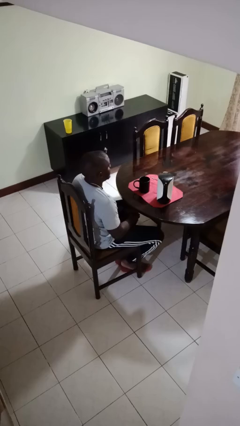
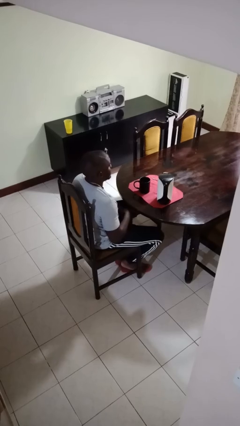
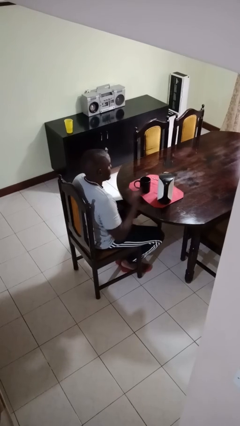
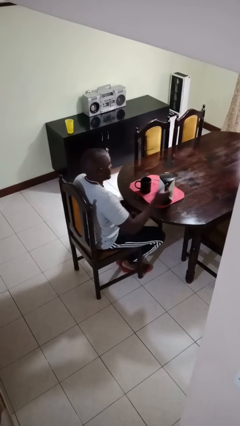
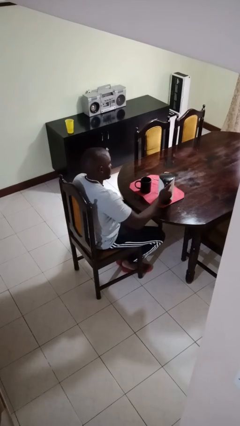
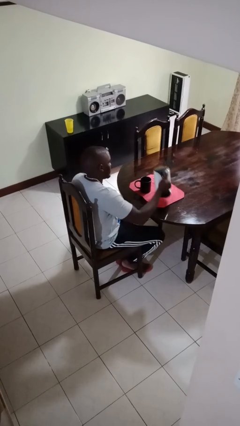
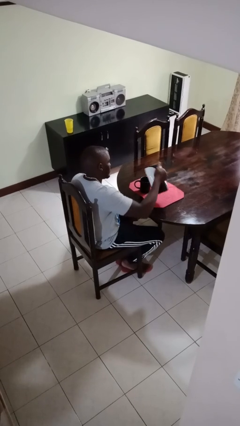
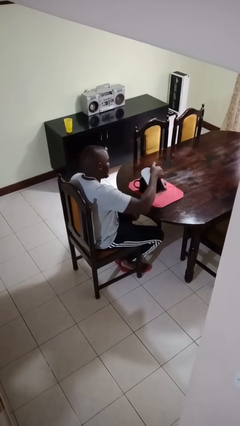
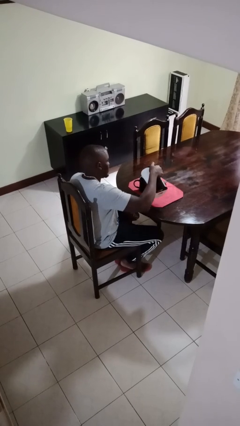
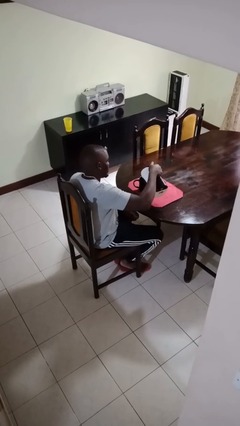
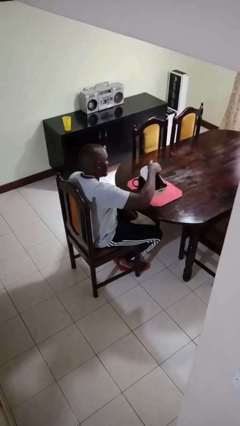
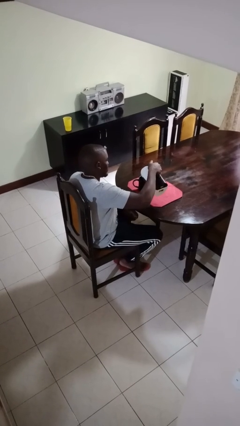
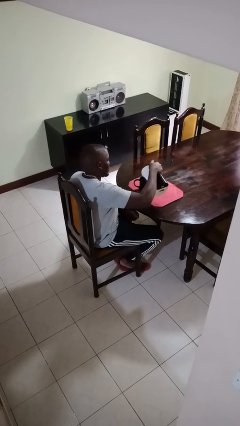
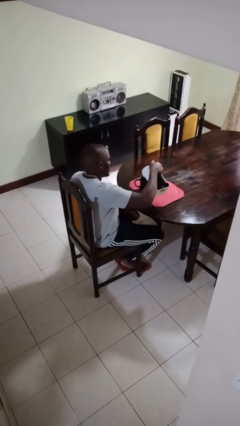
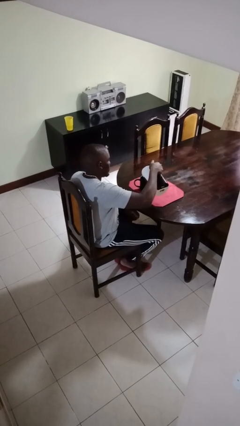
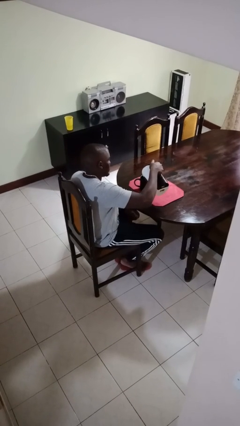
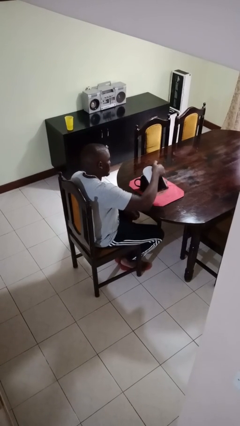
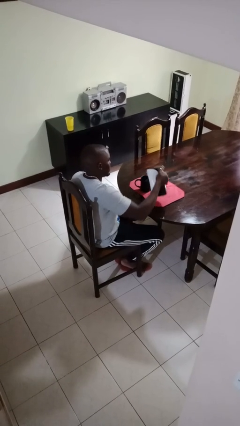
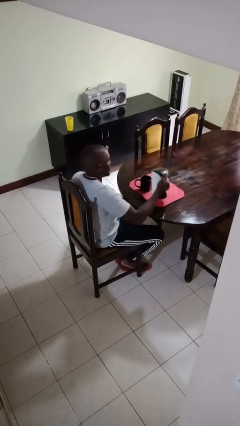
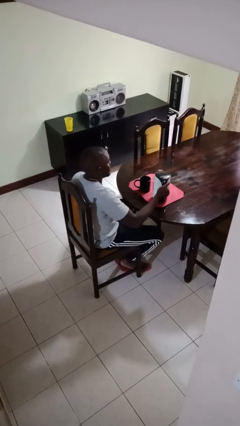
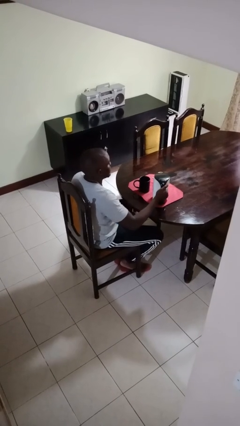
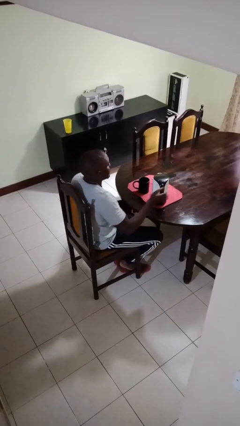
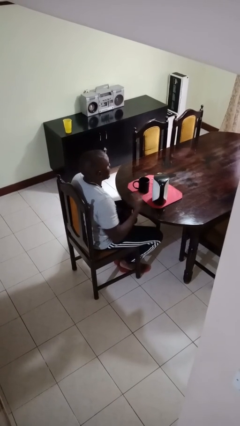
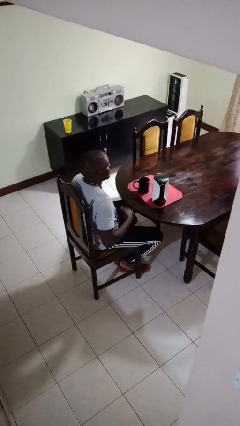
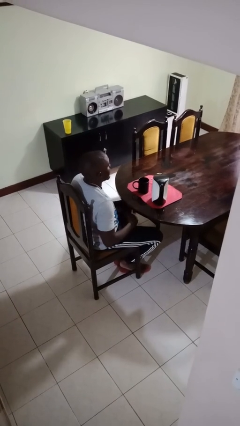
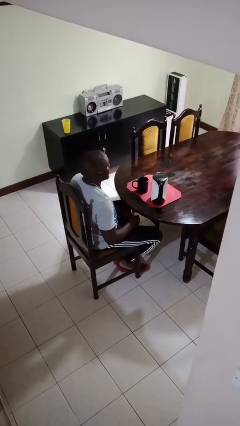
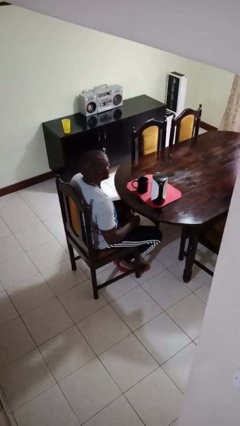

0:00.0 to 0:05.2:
person pours coffee into mug

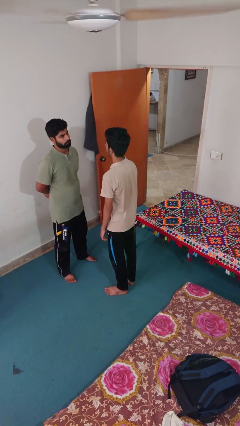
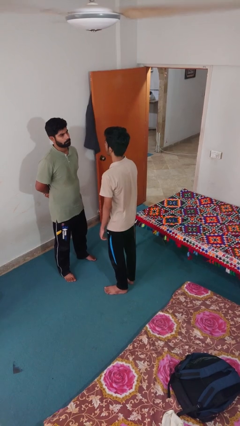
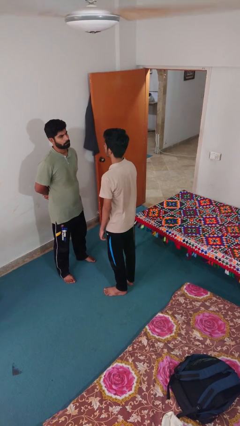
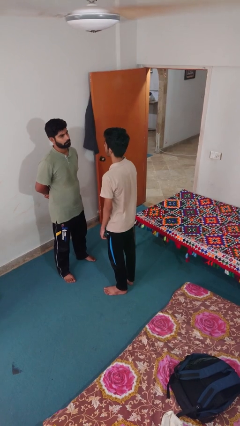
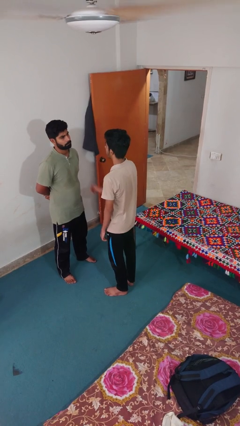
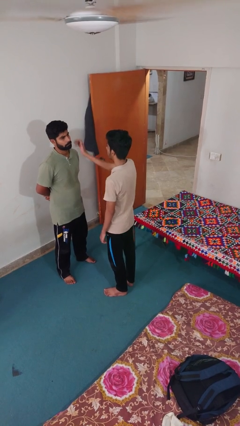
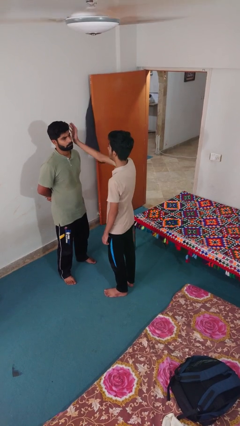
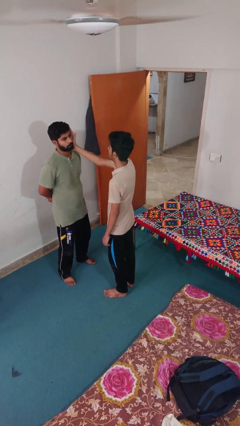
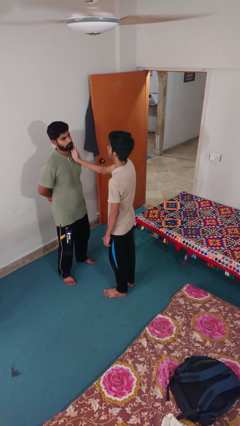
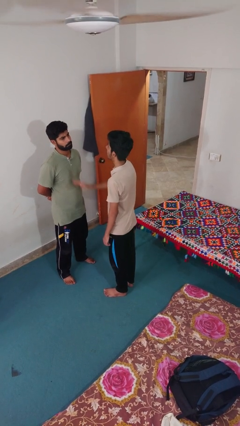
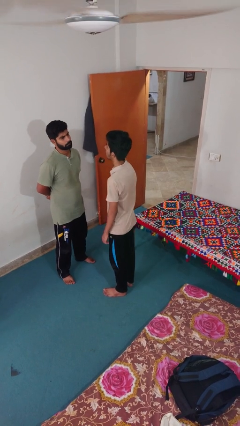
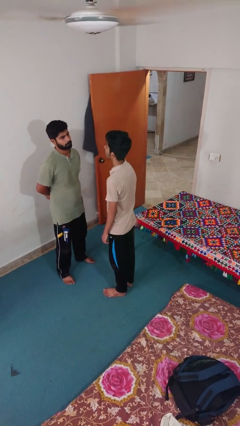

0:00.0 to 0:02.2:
person touches face of person

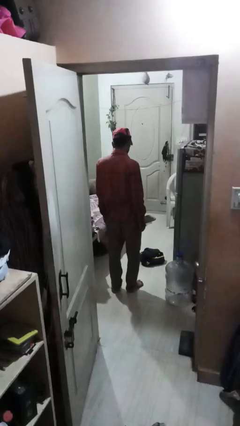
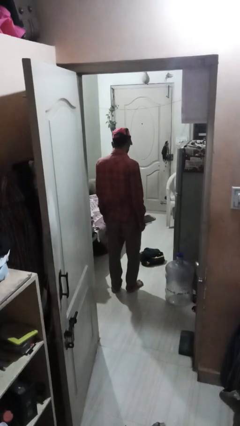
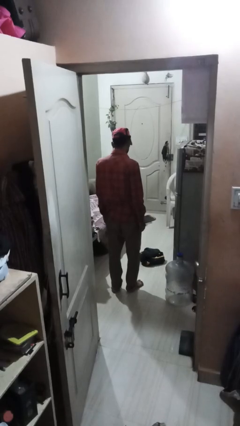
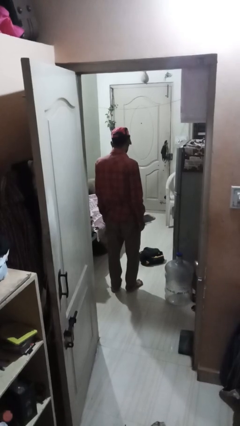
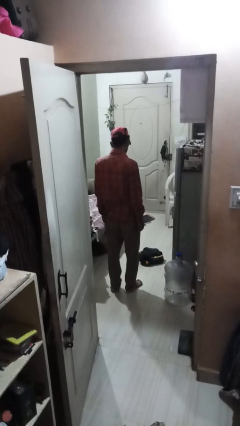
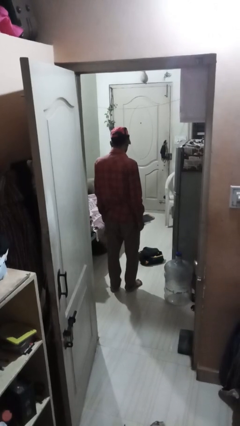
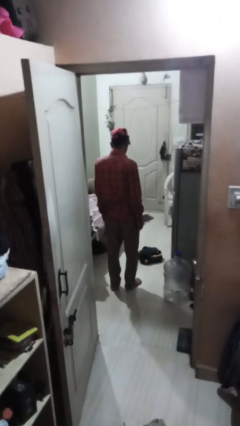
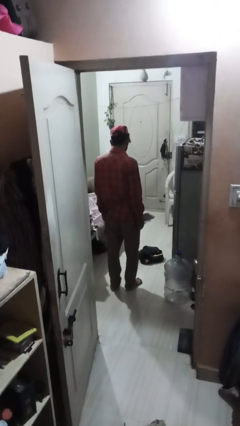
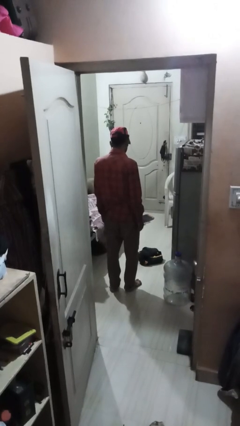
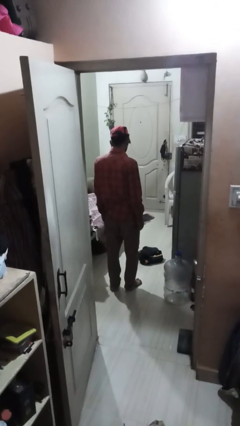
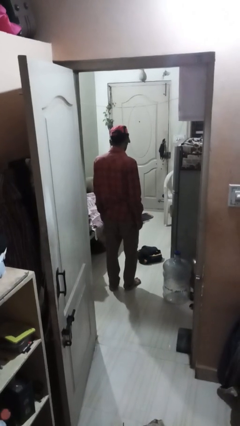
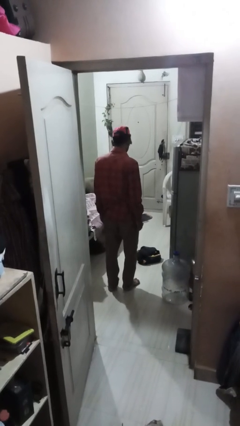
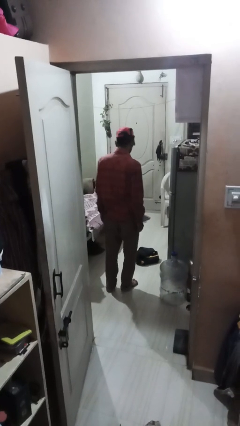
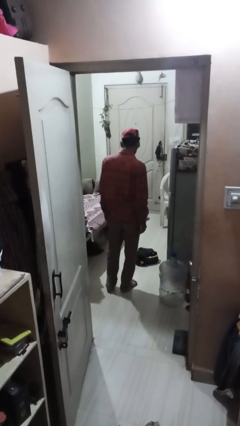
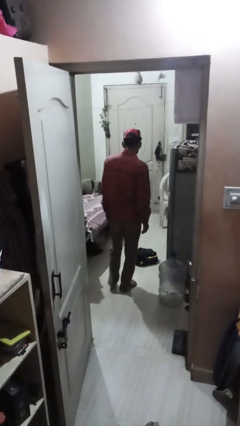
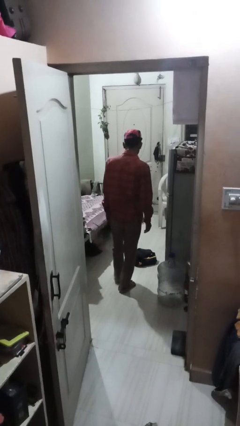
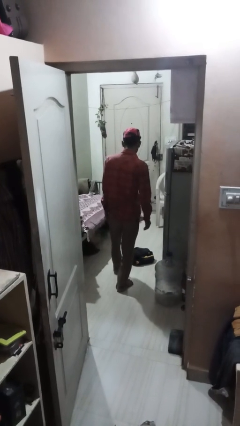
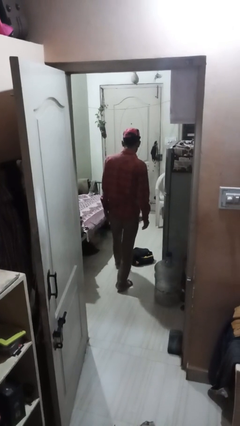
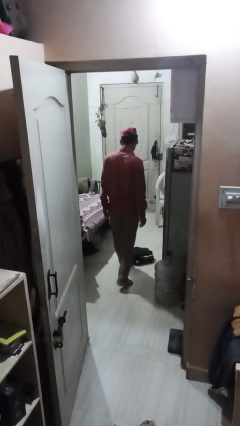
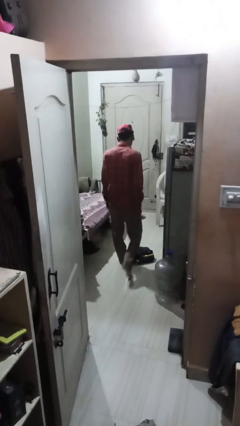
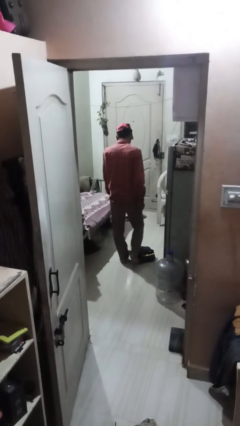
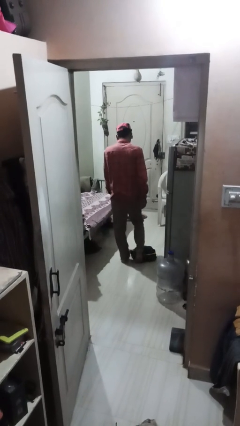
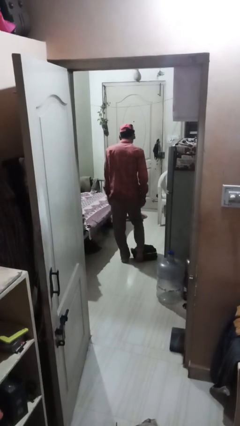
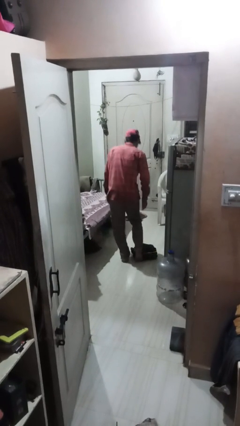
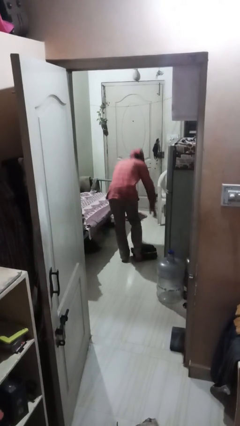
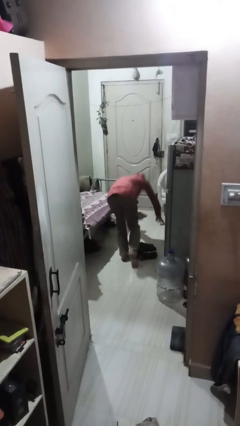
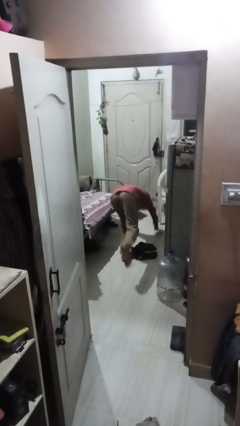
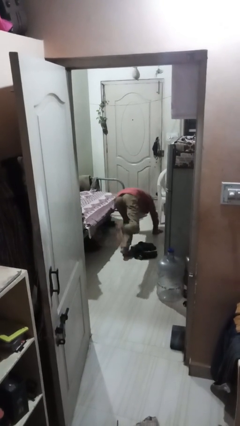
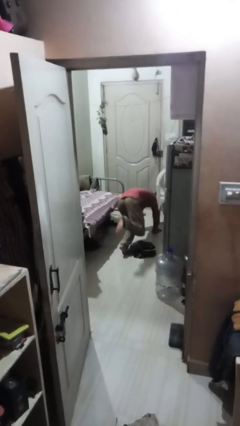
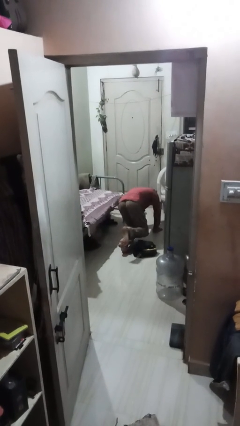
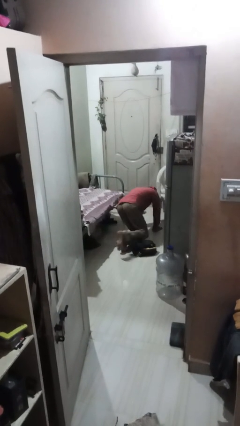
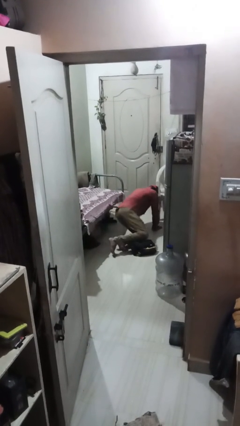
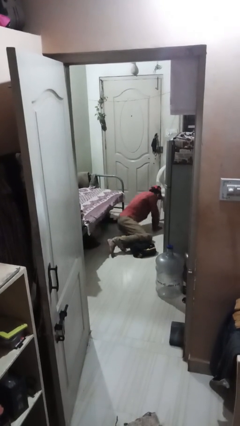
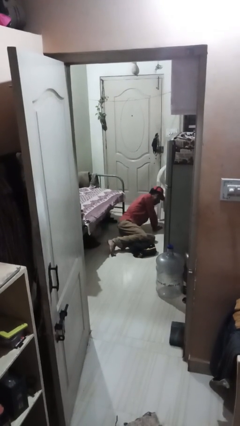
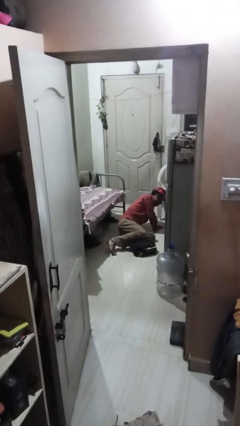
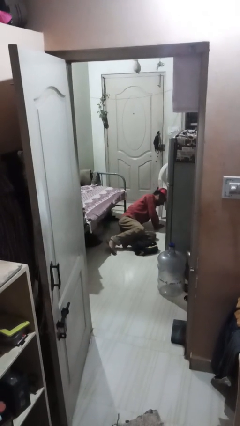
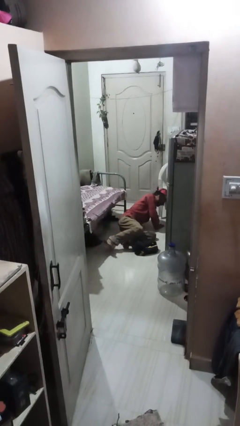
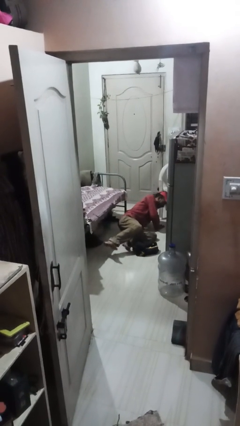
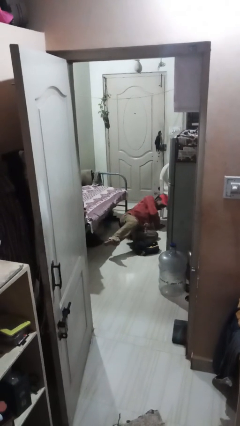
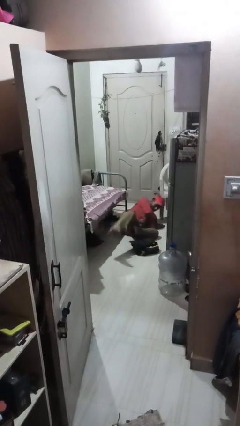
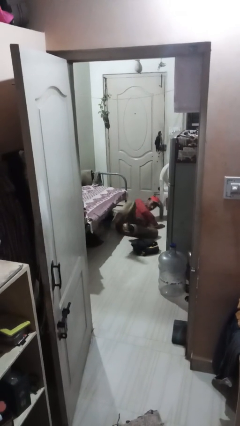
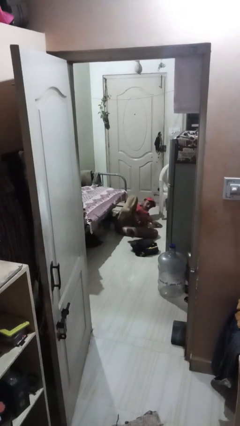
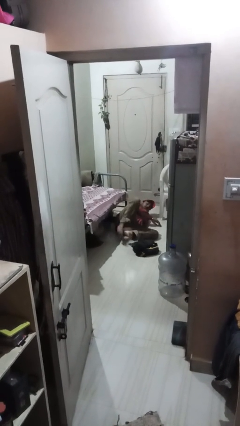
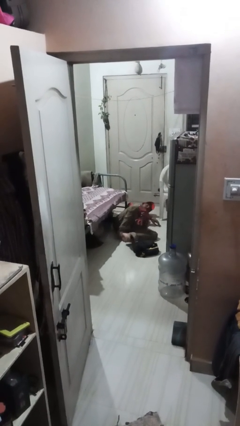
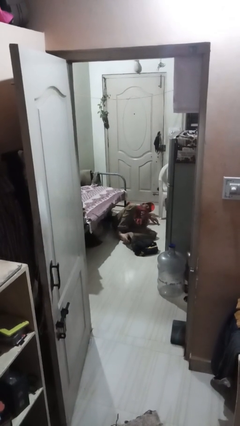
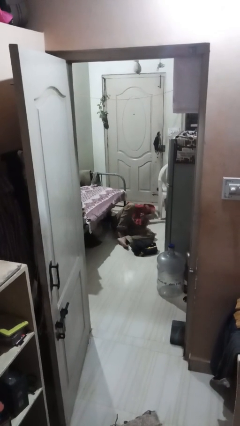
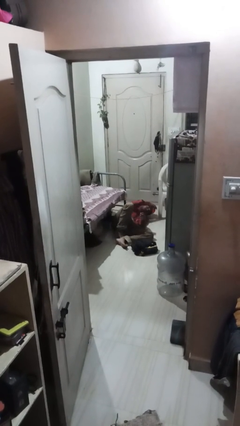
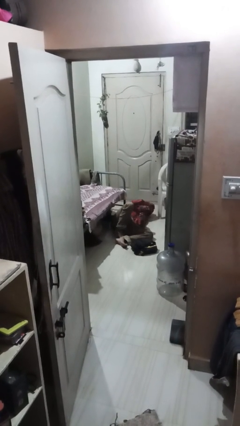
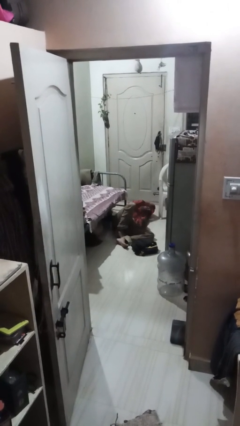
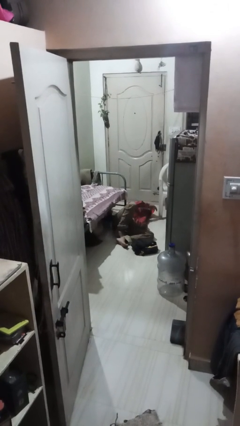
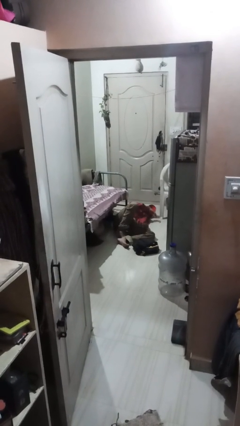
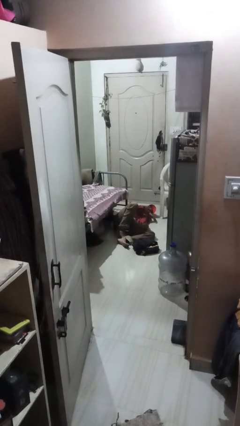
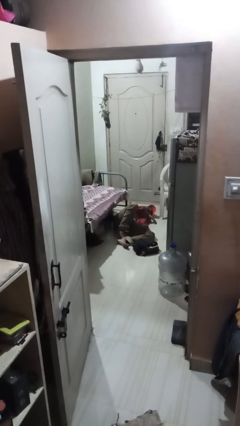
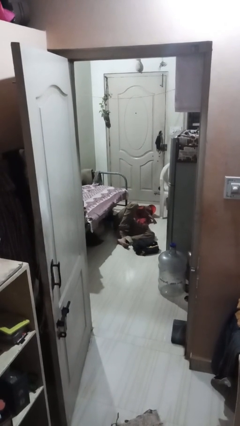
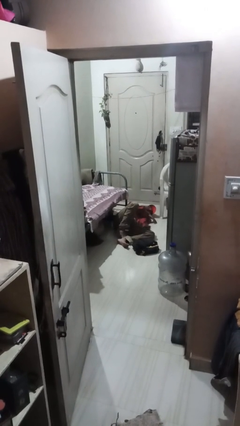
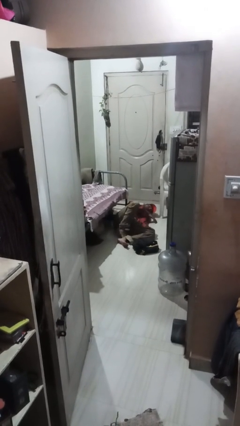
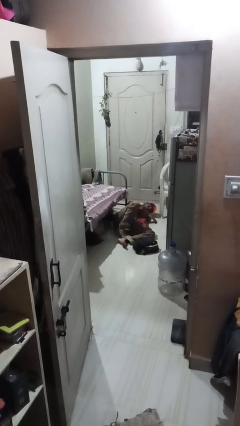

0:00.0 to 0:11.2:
person trips on object on floor
